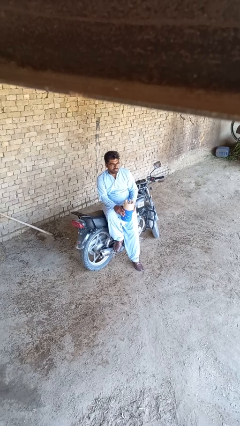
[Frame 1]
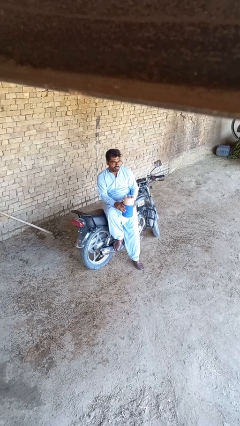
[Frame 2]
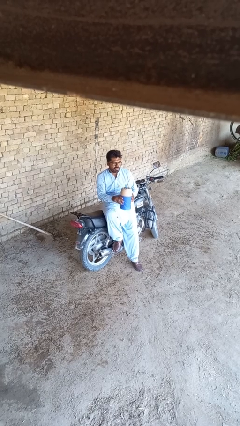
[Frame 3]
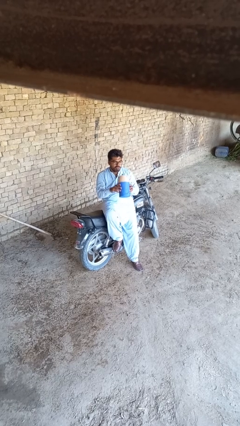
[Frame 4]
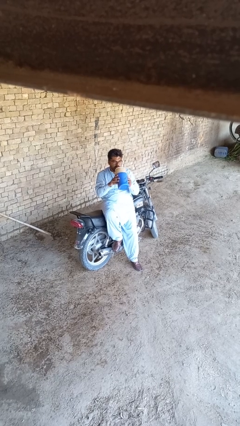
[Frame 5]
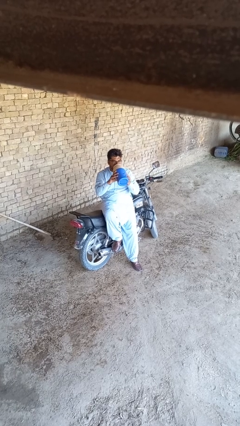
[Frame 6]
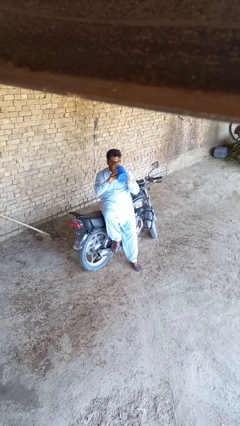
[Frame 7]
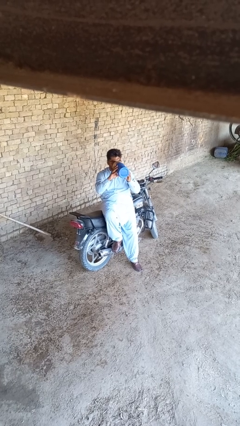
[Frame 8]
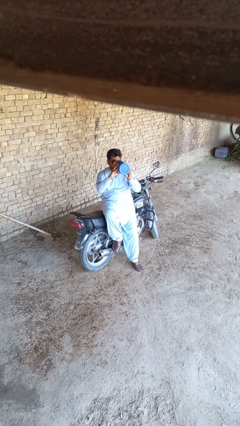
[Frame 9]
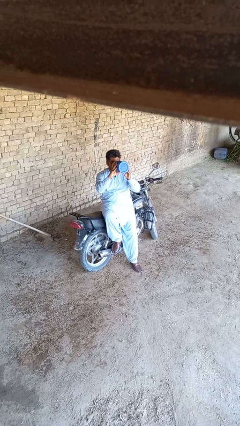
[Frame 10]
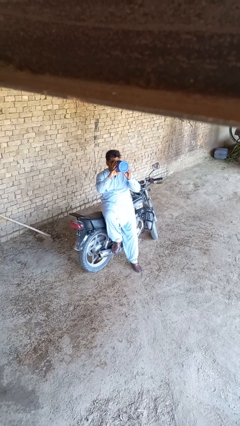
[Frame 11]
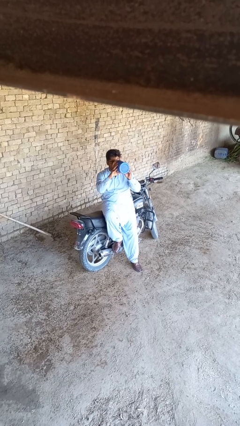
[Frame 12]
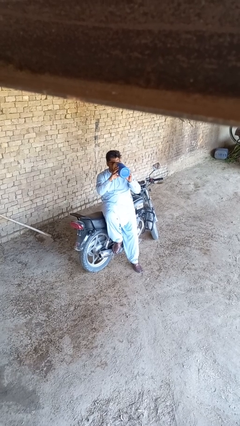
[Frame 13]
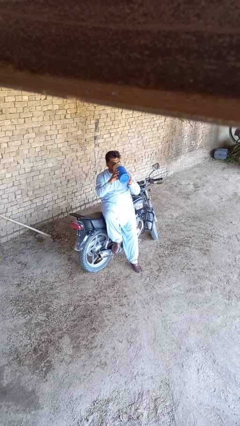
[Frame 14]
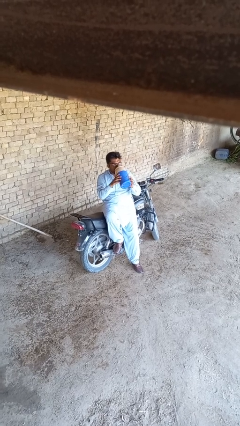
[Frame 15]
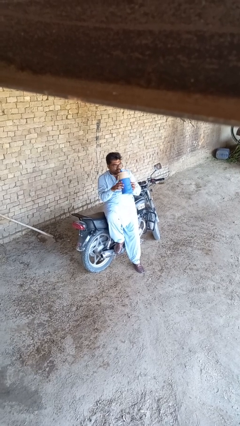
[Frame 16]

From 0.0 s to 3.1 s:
person drinks from bottle

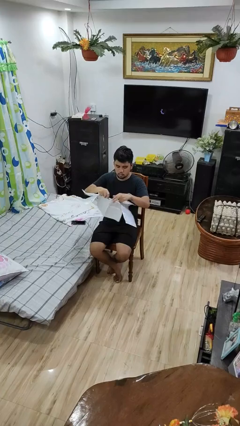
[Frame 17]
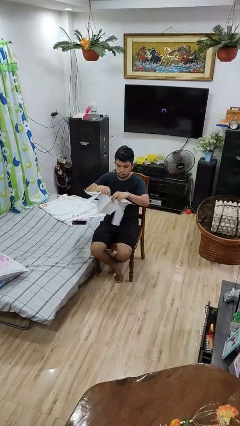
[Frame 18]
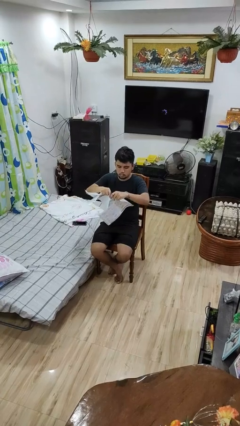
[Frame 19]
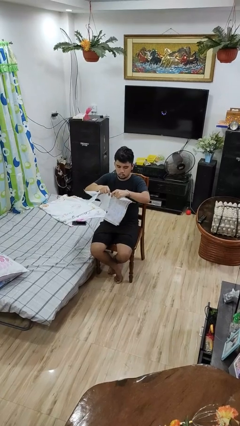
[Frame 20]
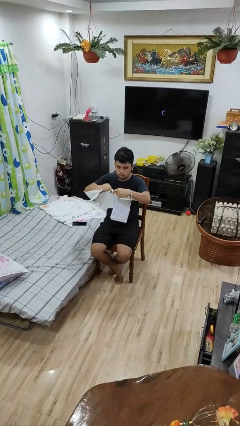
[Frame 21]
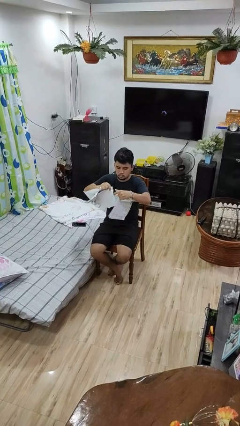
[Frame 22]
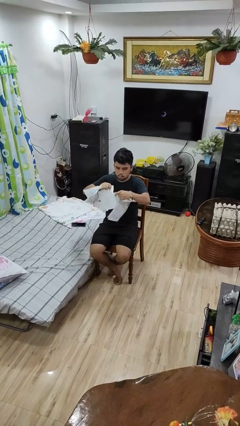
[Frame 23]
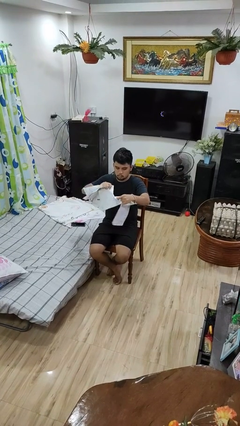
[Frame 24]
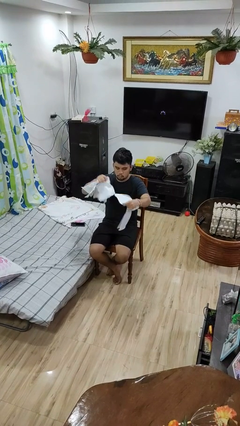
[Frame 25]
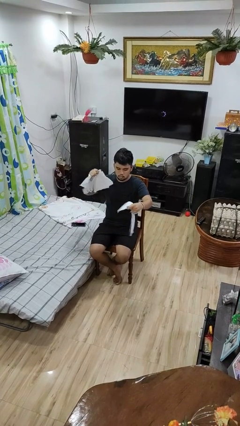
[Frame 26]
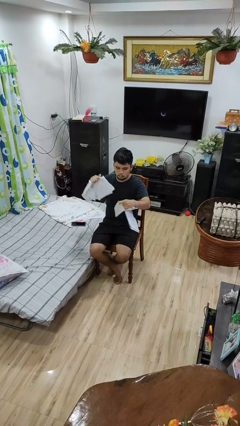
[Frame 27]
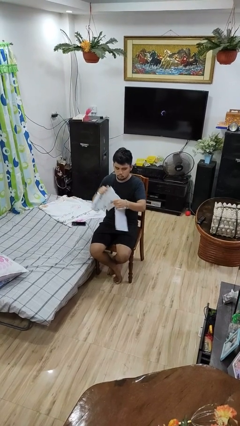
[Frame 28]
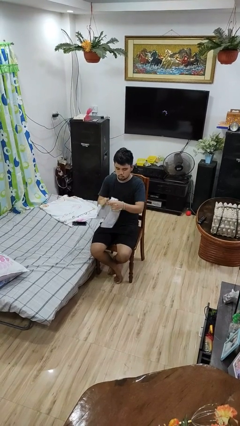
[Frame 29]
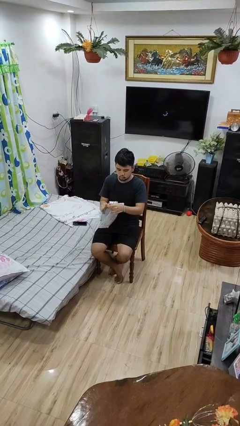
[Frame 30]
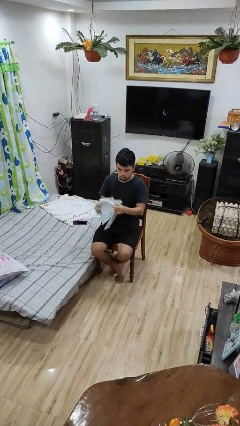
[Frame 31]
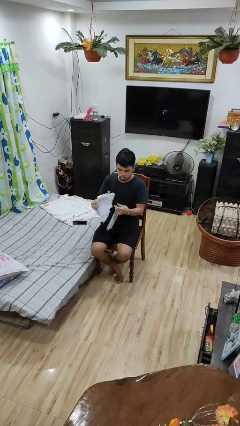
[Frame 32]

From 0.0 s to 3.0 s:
person tears paper

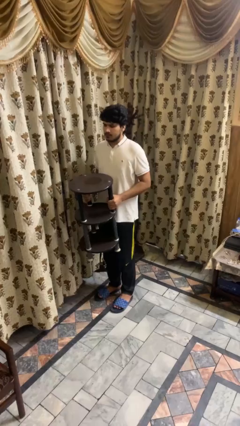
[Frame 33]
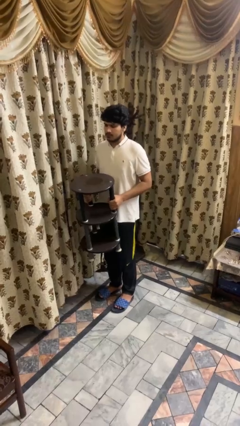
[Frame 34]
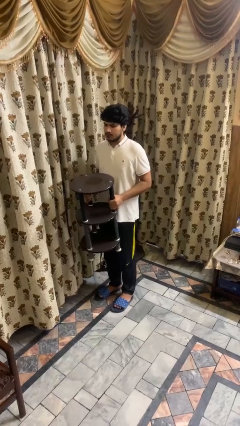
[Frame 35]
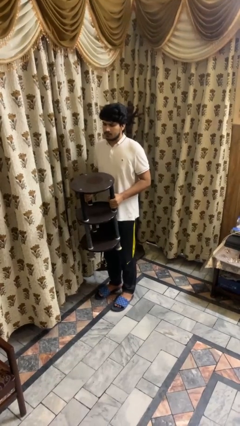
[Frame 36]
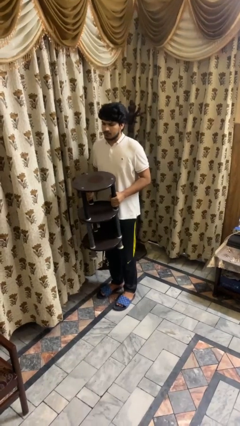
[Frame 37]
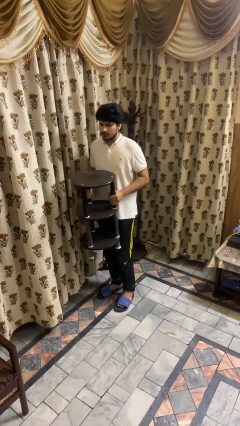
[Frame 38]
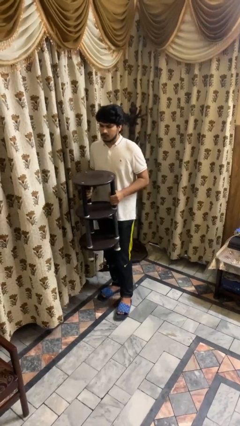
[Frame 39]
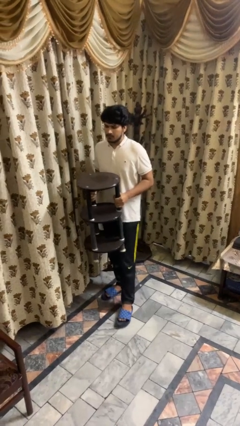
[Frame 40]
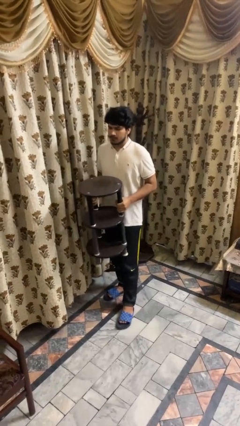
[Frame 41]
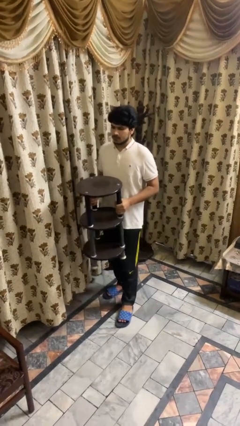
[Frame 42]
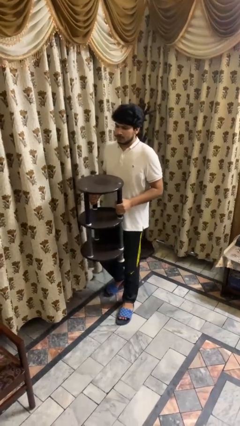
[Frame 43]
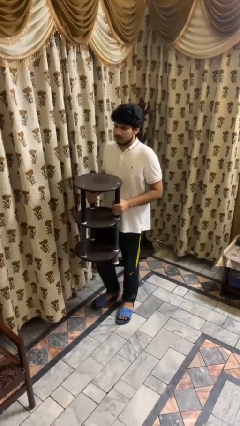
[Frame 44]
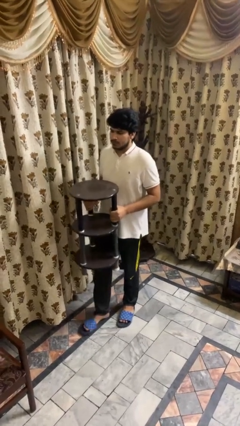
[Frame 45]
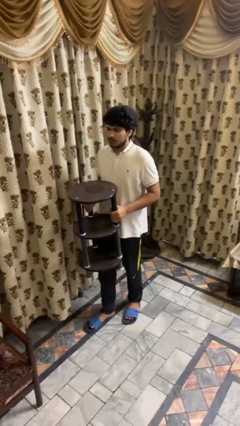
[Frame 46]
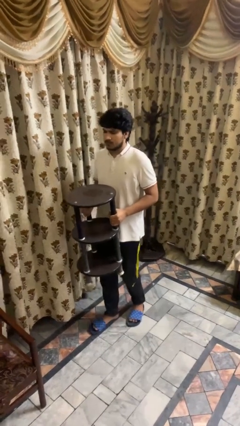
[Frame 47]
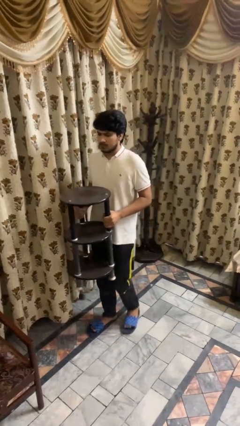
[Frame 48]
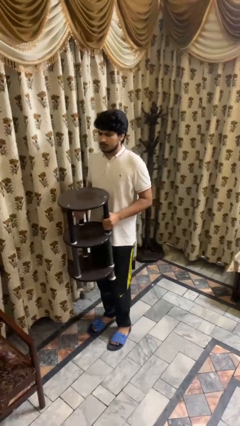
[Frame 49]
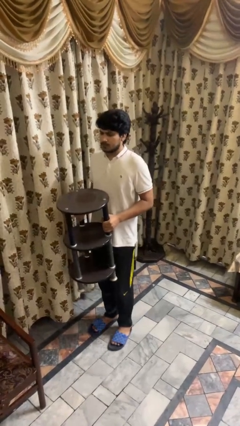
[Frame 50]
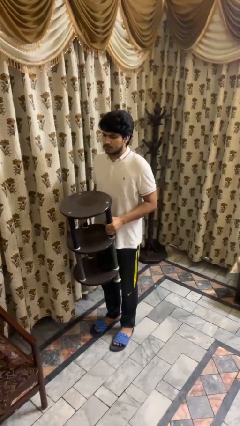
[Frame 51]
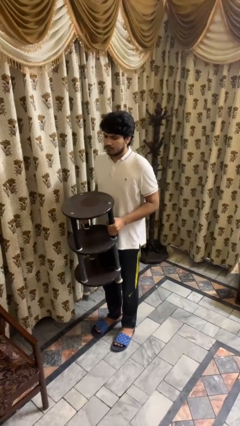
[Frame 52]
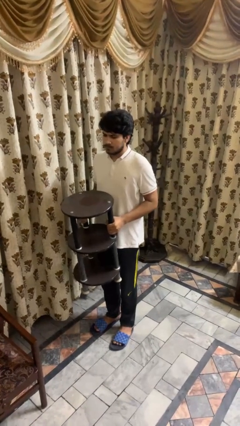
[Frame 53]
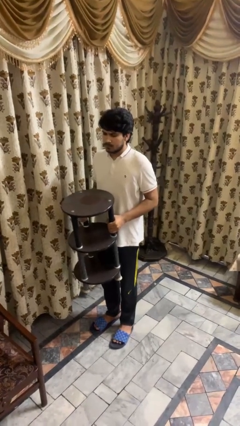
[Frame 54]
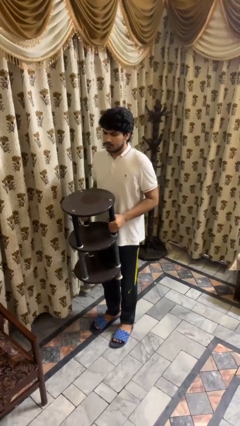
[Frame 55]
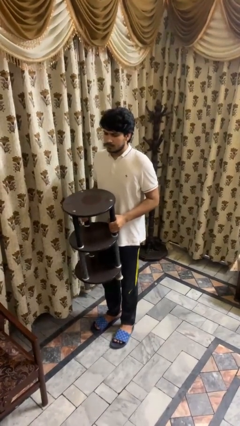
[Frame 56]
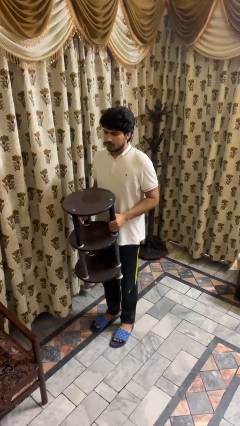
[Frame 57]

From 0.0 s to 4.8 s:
person carries furniture

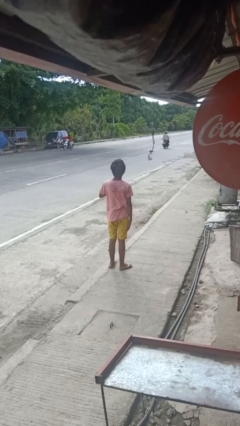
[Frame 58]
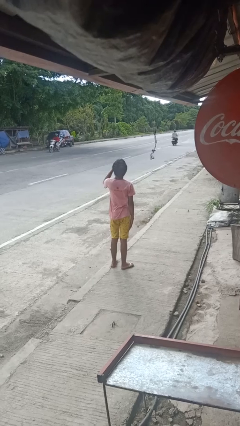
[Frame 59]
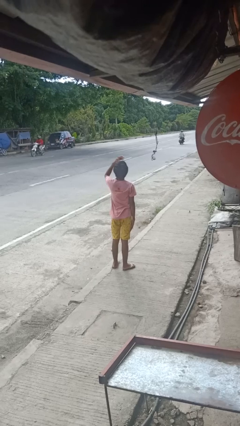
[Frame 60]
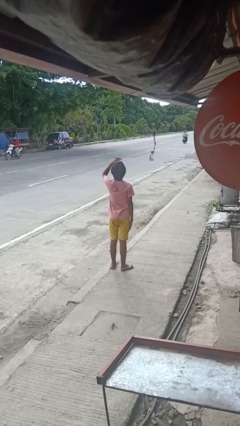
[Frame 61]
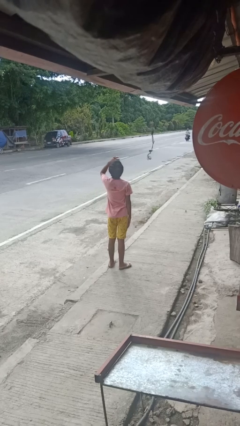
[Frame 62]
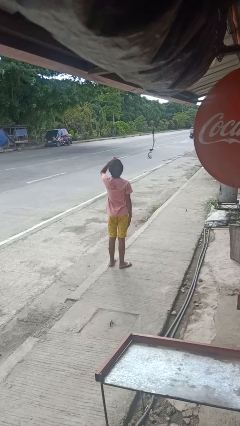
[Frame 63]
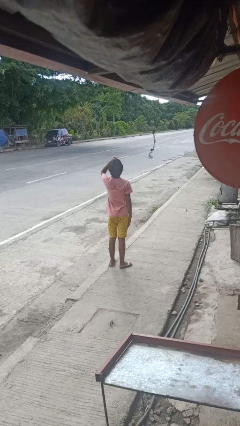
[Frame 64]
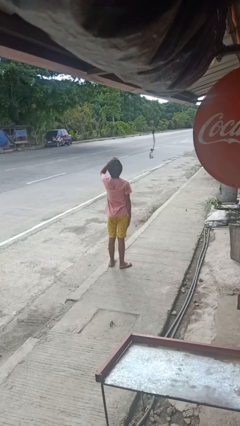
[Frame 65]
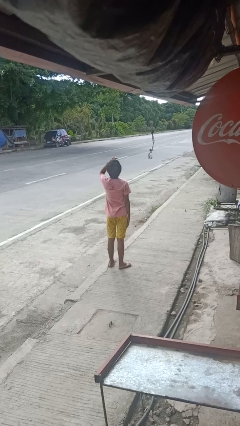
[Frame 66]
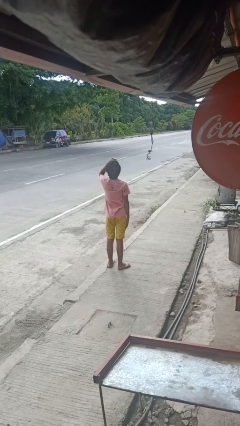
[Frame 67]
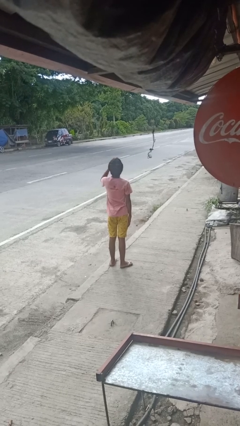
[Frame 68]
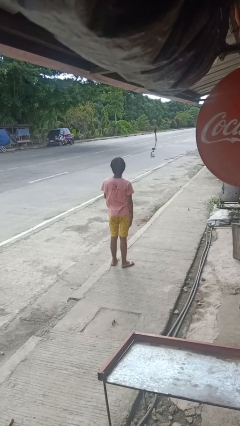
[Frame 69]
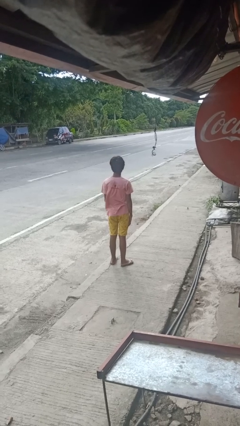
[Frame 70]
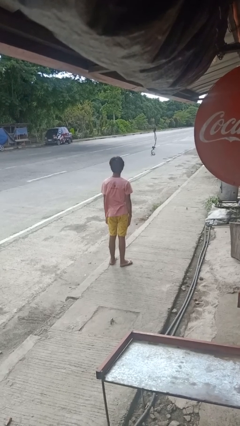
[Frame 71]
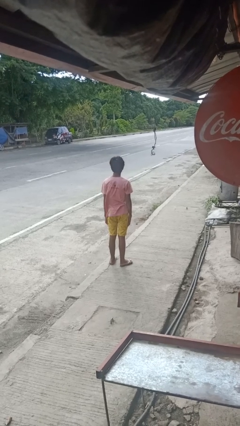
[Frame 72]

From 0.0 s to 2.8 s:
person shades eyes

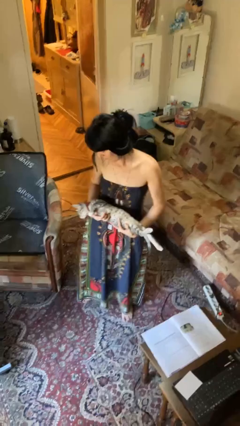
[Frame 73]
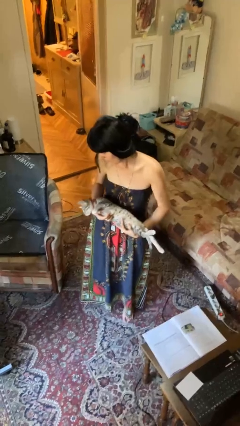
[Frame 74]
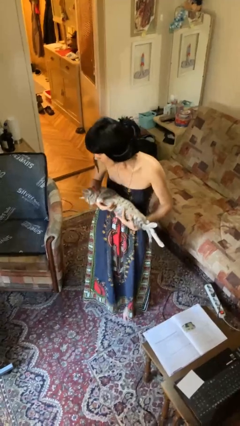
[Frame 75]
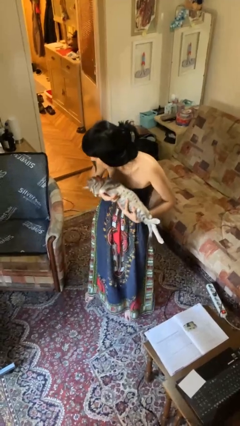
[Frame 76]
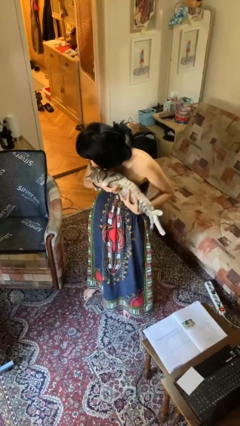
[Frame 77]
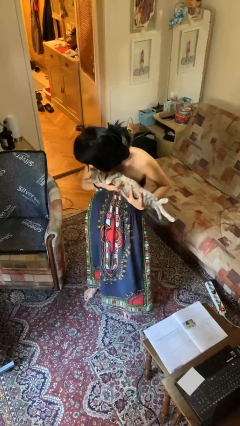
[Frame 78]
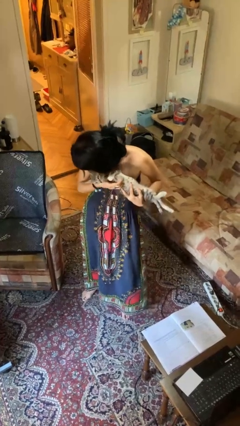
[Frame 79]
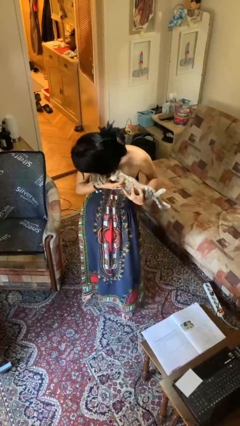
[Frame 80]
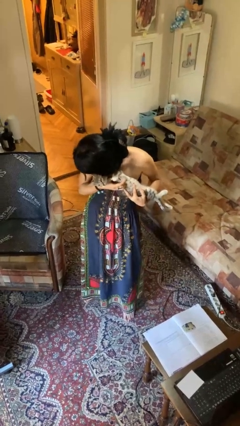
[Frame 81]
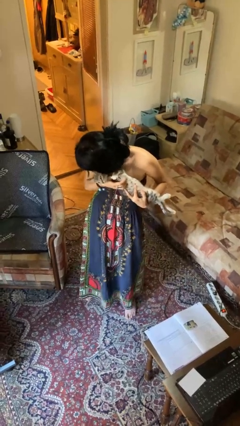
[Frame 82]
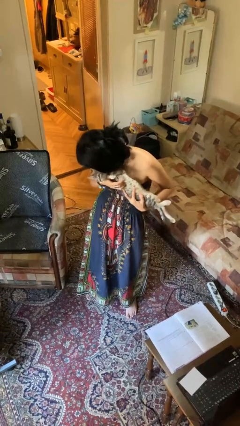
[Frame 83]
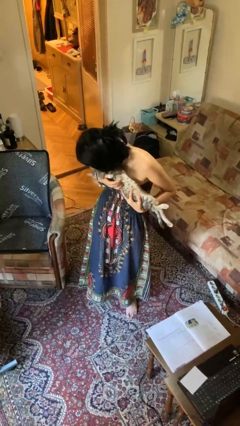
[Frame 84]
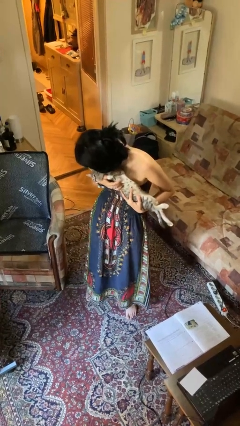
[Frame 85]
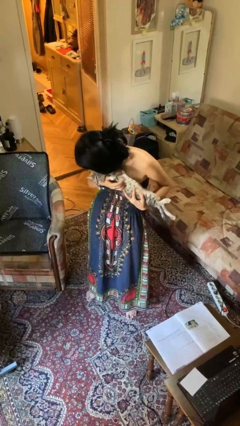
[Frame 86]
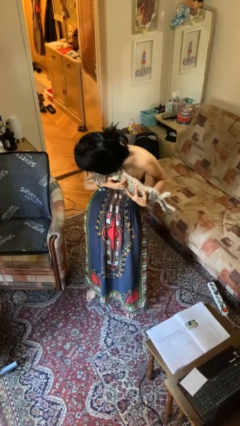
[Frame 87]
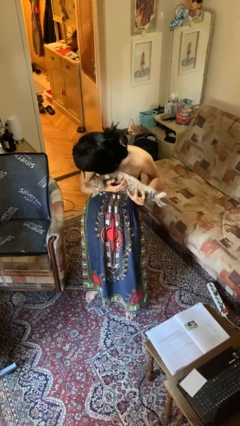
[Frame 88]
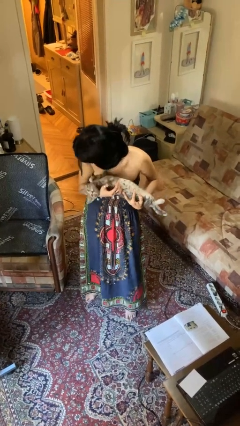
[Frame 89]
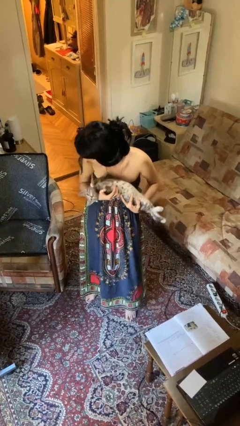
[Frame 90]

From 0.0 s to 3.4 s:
person hugs cat
